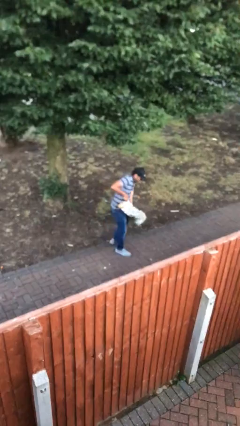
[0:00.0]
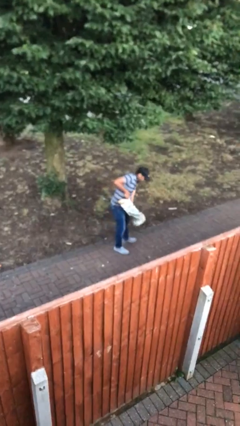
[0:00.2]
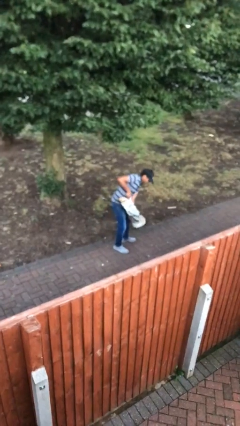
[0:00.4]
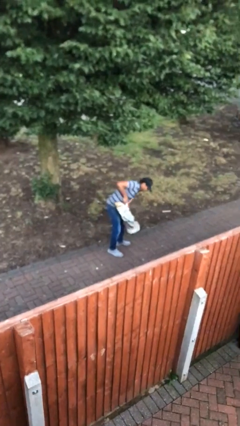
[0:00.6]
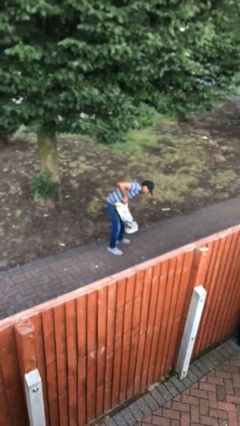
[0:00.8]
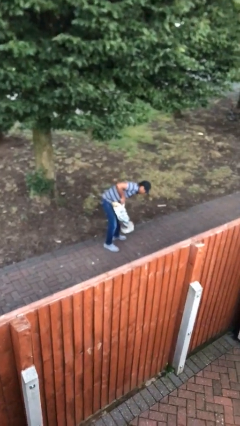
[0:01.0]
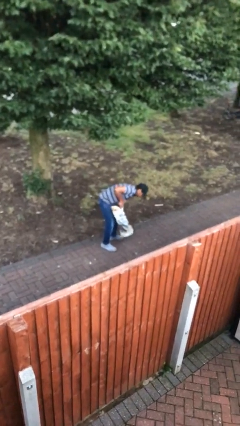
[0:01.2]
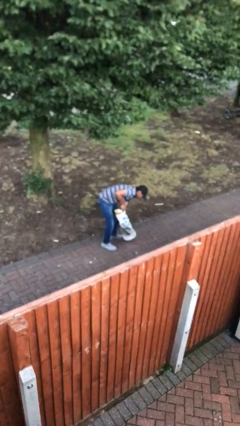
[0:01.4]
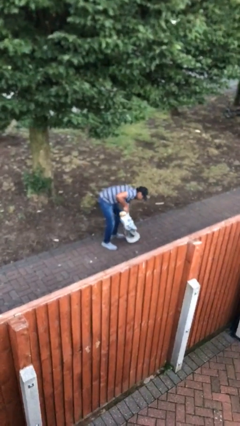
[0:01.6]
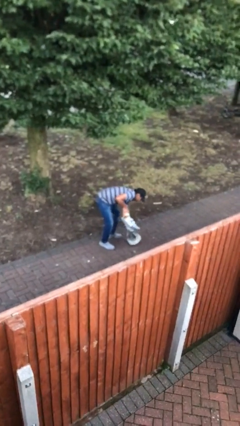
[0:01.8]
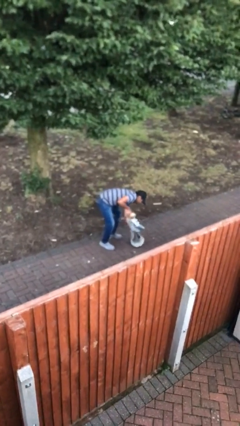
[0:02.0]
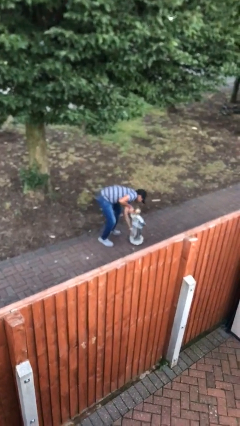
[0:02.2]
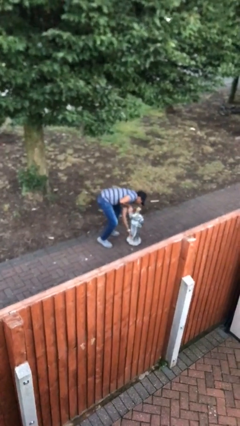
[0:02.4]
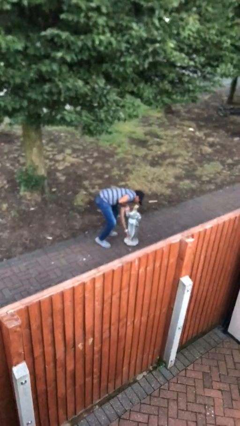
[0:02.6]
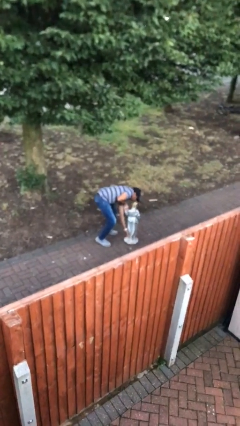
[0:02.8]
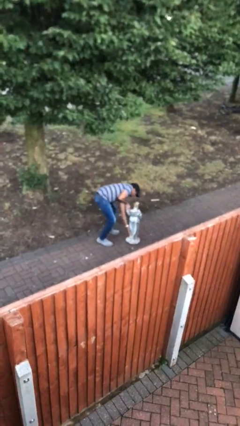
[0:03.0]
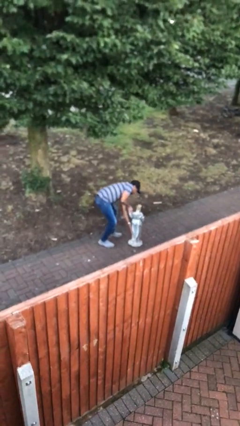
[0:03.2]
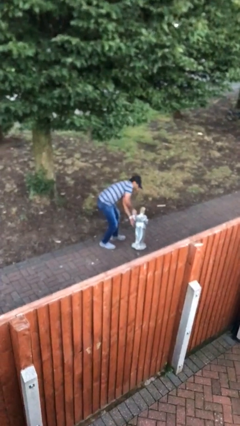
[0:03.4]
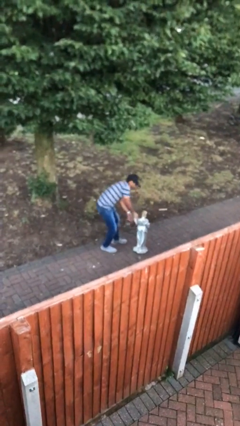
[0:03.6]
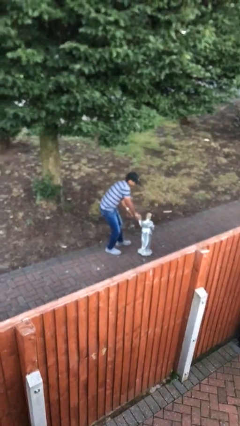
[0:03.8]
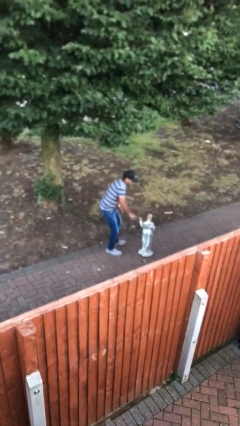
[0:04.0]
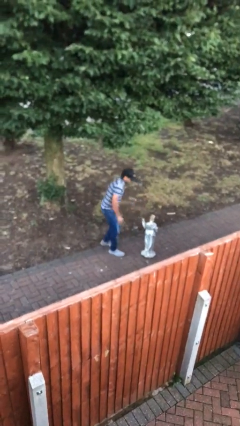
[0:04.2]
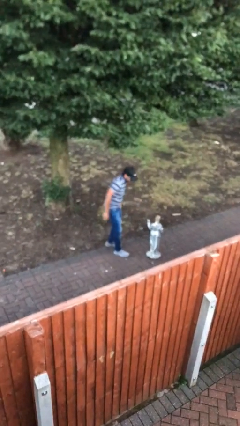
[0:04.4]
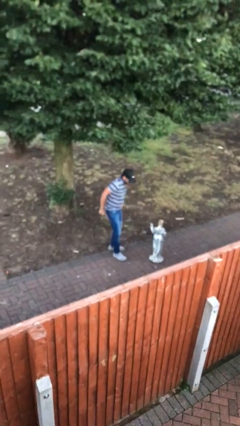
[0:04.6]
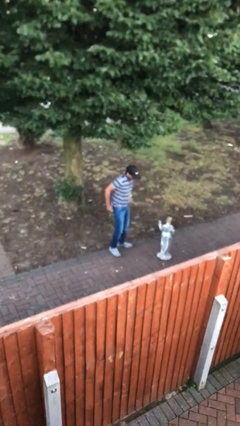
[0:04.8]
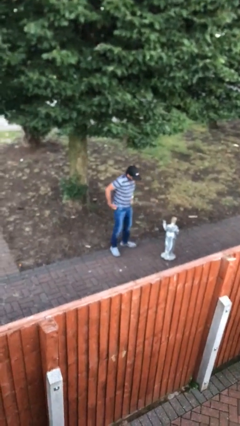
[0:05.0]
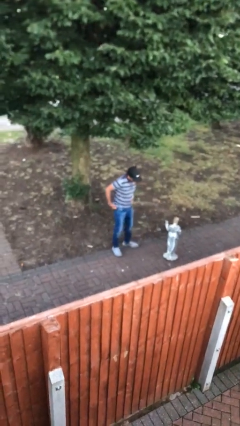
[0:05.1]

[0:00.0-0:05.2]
person puts down object on floor

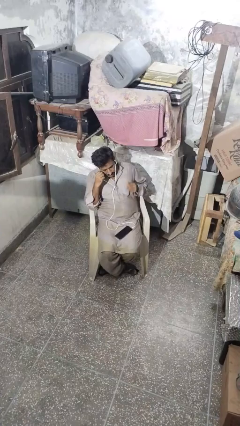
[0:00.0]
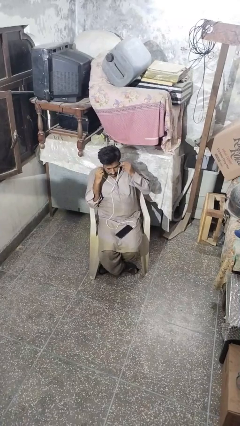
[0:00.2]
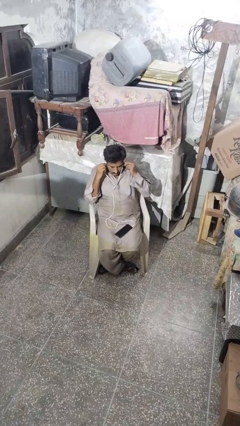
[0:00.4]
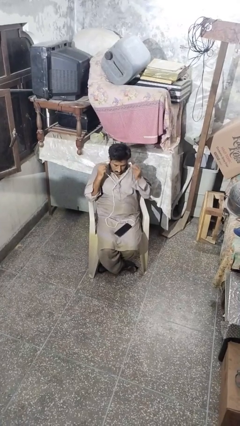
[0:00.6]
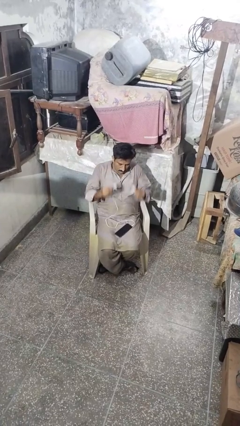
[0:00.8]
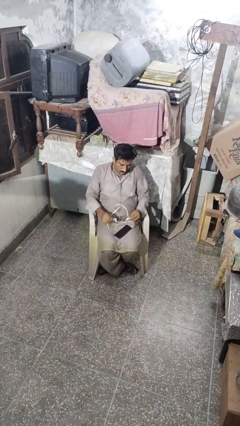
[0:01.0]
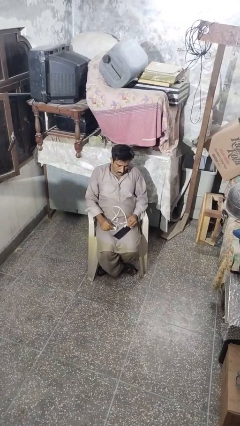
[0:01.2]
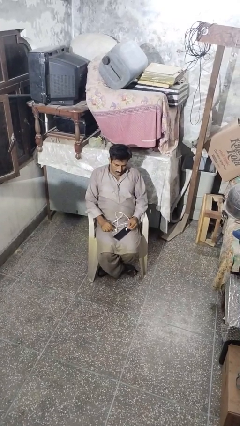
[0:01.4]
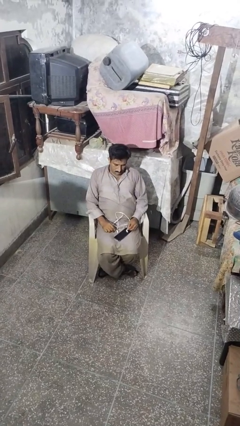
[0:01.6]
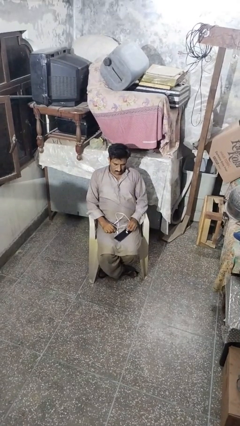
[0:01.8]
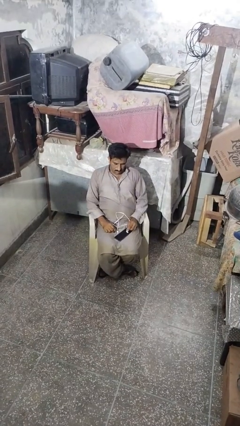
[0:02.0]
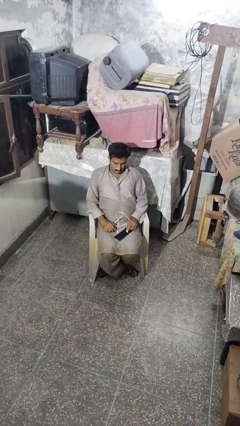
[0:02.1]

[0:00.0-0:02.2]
person takes off headphones

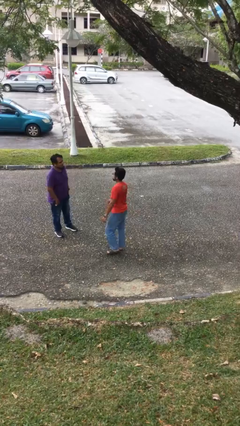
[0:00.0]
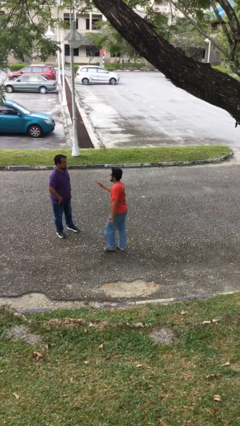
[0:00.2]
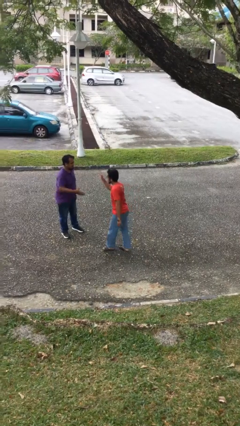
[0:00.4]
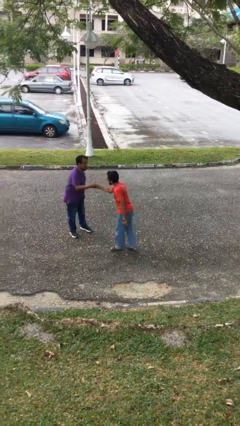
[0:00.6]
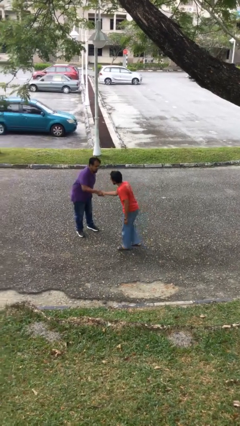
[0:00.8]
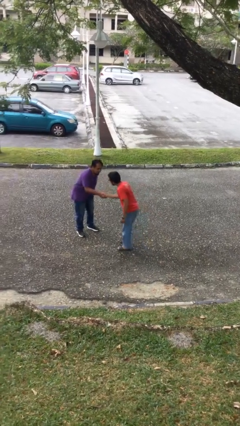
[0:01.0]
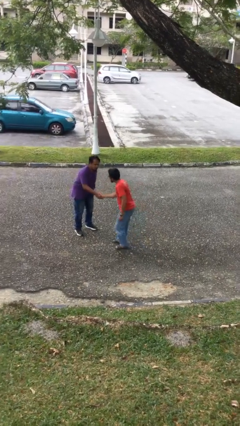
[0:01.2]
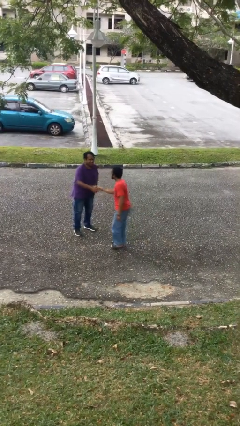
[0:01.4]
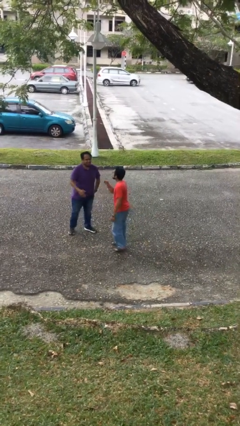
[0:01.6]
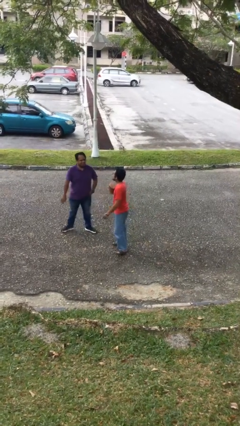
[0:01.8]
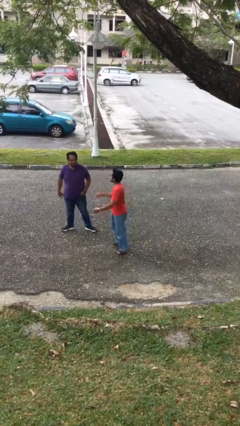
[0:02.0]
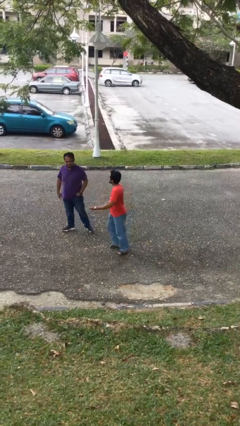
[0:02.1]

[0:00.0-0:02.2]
person shakes hand

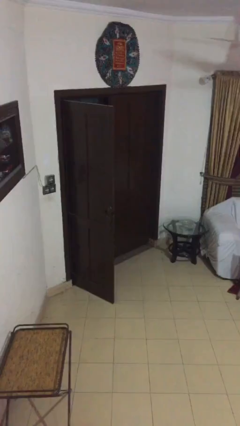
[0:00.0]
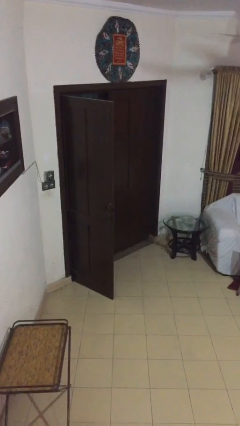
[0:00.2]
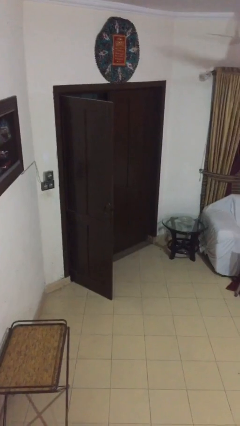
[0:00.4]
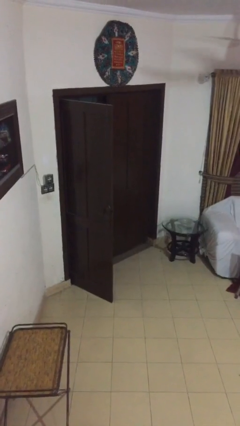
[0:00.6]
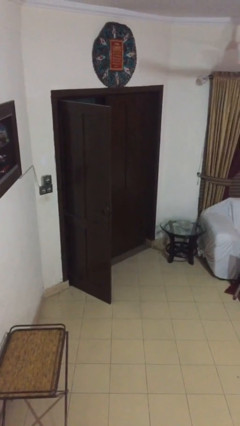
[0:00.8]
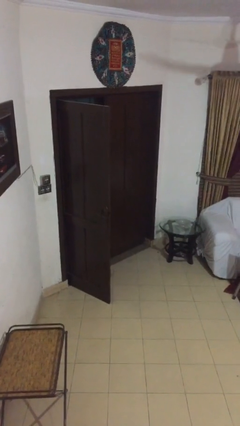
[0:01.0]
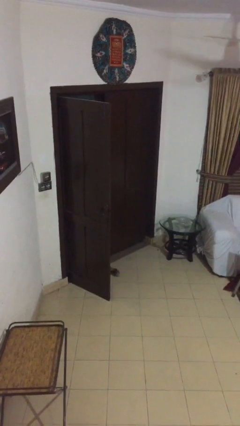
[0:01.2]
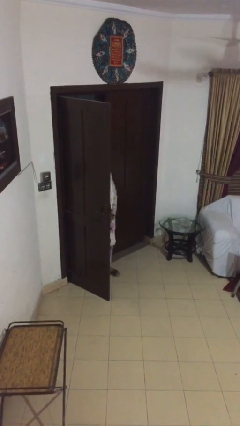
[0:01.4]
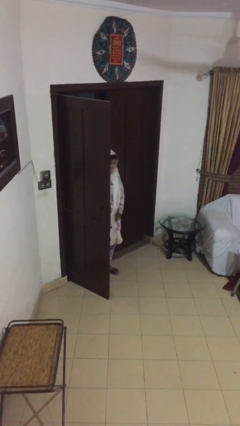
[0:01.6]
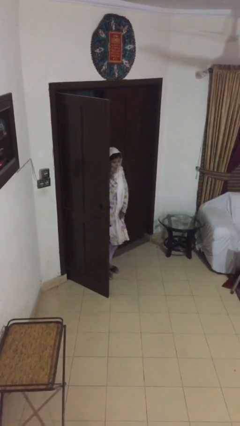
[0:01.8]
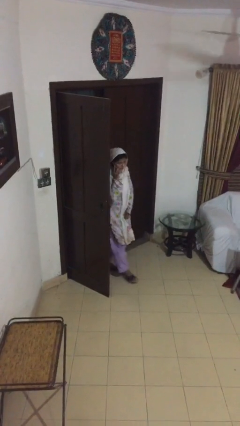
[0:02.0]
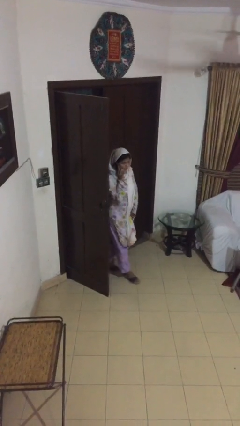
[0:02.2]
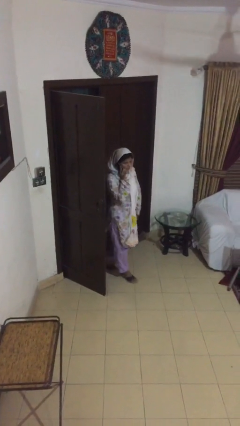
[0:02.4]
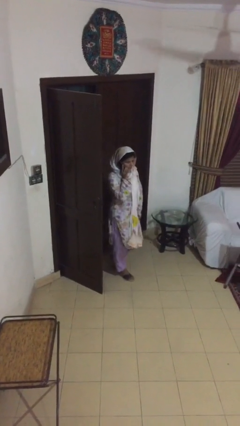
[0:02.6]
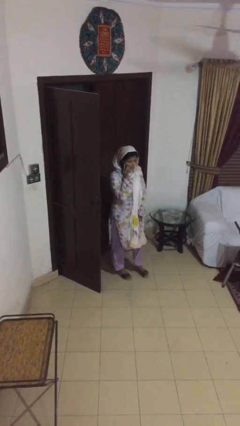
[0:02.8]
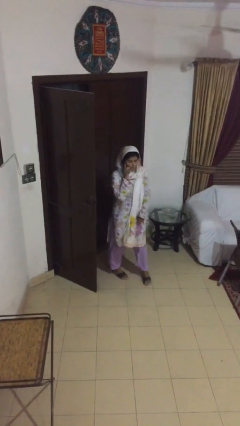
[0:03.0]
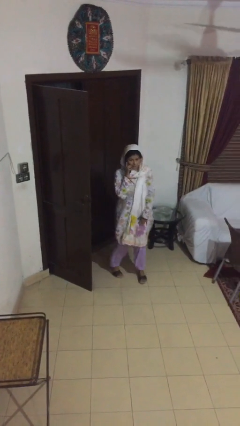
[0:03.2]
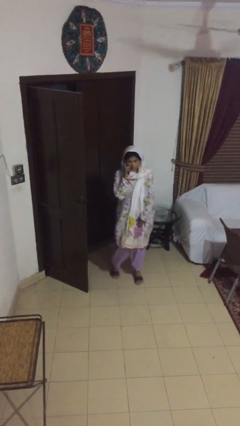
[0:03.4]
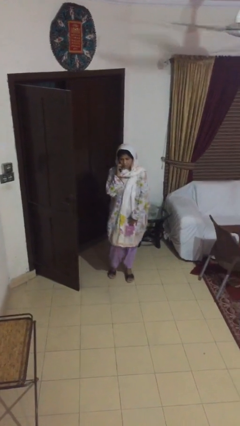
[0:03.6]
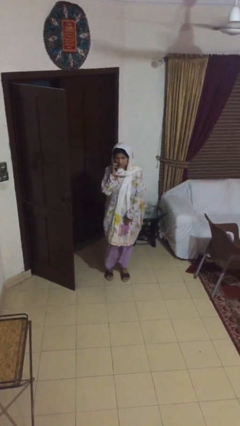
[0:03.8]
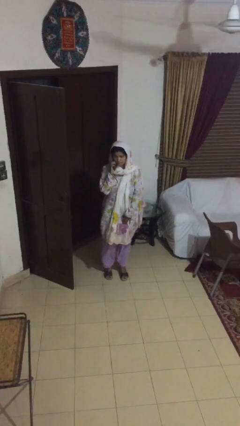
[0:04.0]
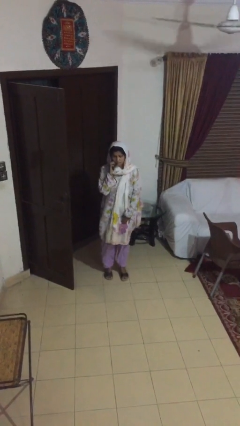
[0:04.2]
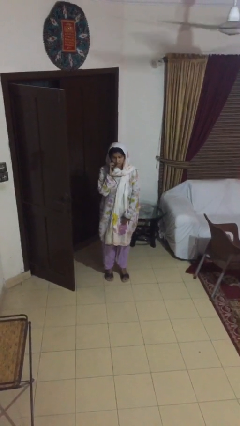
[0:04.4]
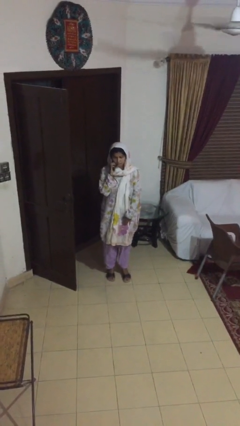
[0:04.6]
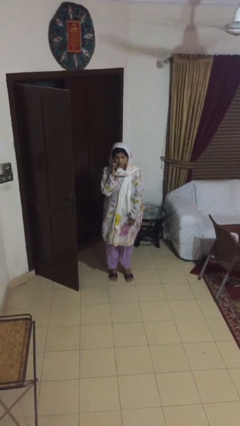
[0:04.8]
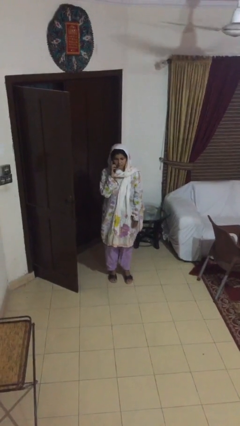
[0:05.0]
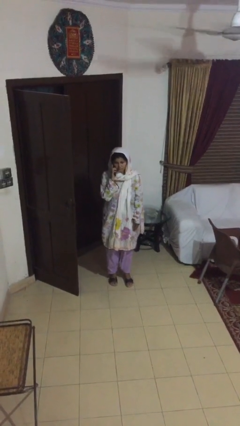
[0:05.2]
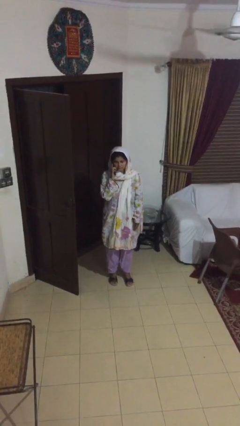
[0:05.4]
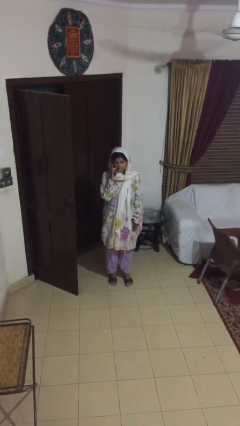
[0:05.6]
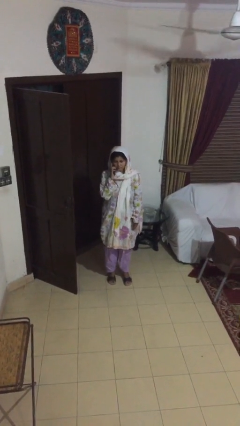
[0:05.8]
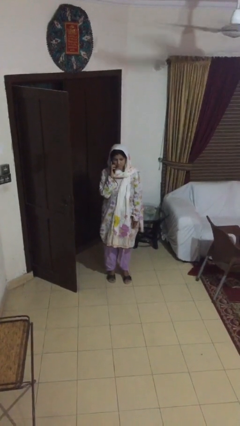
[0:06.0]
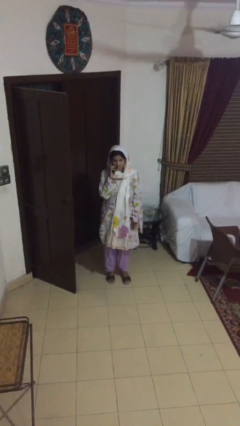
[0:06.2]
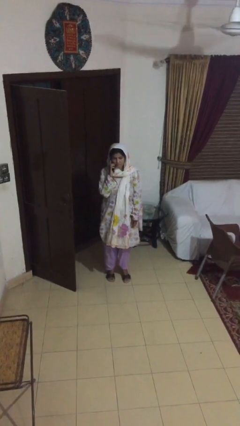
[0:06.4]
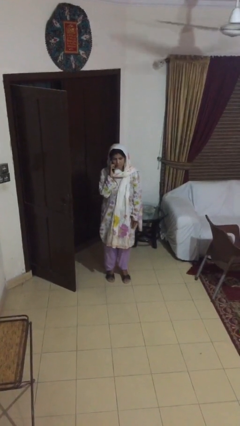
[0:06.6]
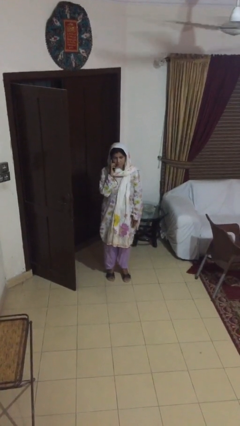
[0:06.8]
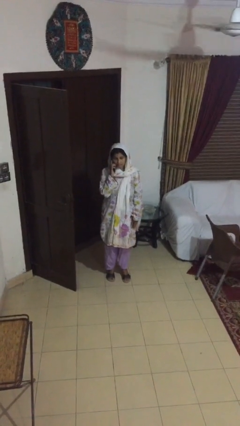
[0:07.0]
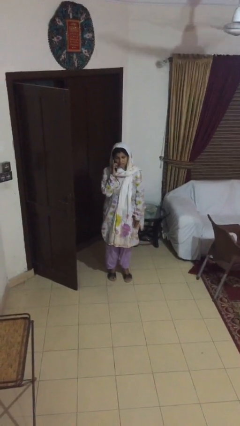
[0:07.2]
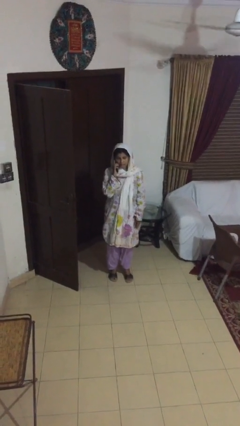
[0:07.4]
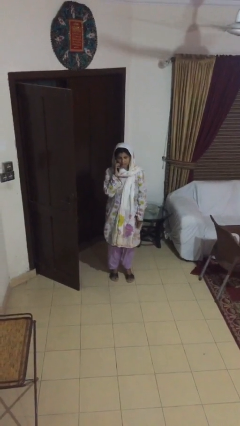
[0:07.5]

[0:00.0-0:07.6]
person enters scene through structure

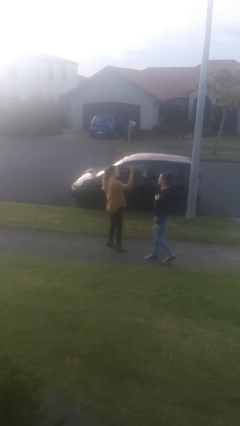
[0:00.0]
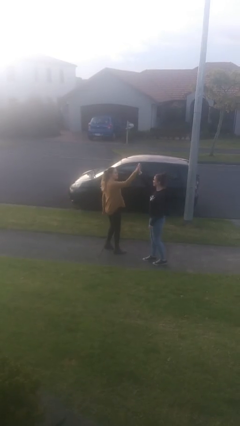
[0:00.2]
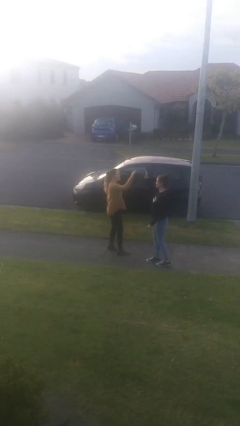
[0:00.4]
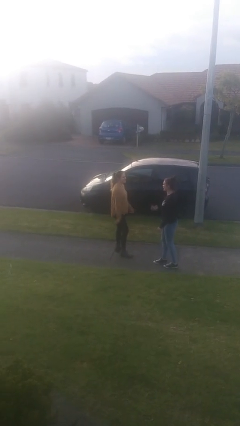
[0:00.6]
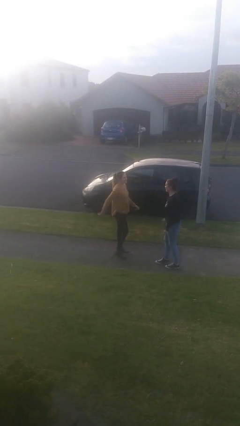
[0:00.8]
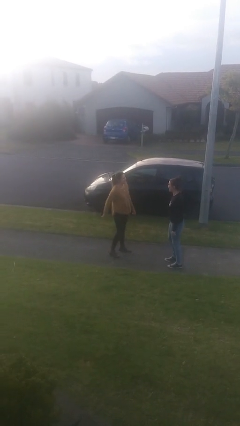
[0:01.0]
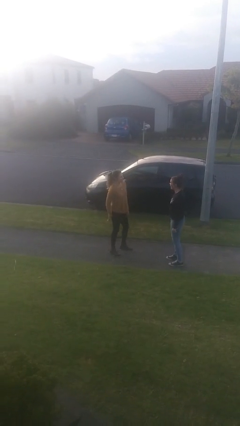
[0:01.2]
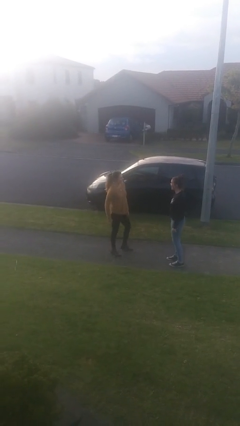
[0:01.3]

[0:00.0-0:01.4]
person highfives hand
